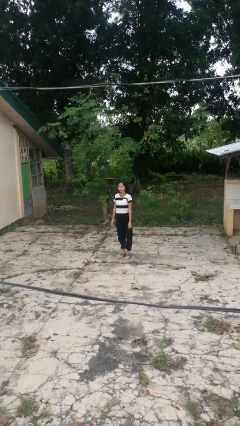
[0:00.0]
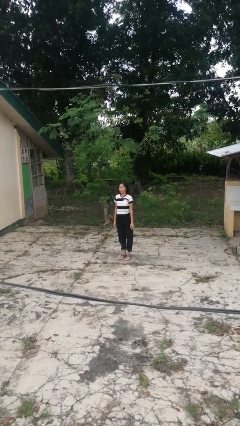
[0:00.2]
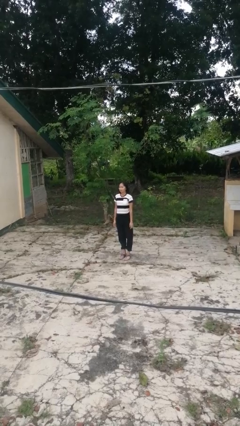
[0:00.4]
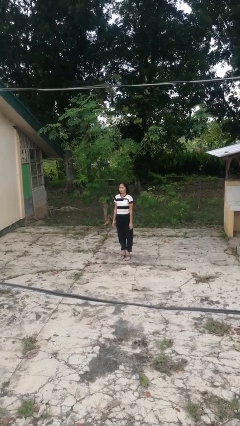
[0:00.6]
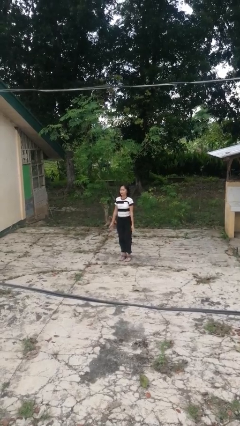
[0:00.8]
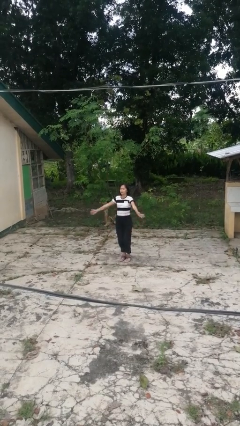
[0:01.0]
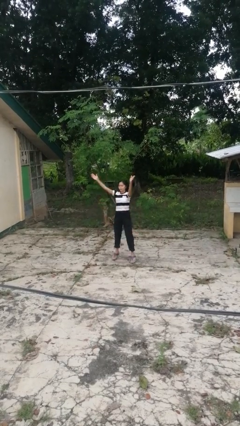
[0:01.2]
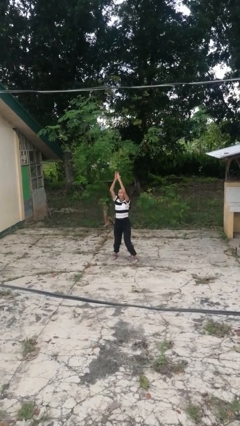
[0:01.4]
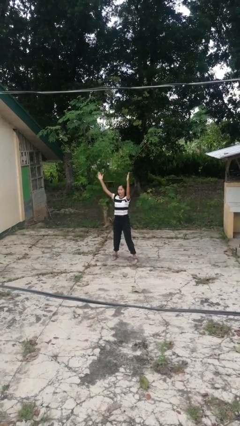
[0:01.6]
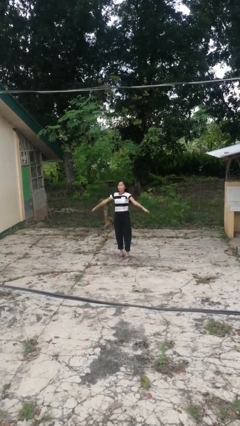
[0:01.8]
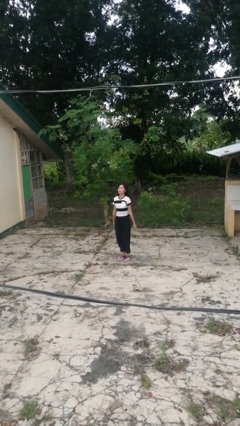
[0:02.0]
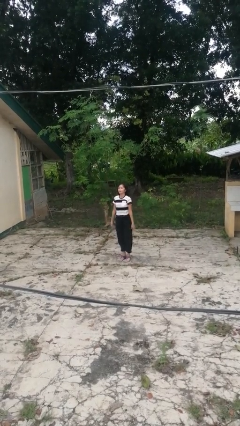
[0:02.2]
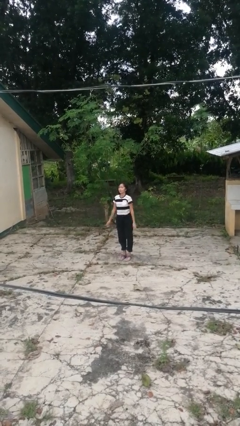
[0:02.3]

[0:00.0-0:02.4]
person exercises with jumping jacks

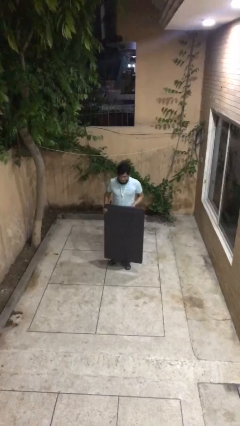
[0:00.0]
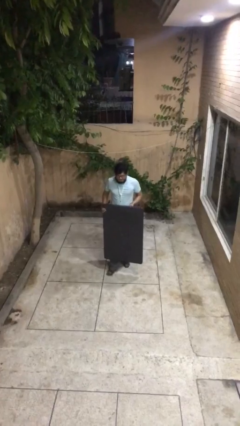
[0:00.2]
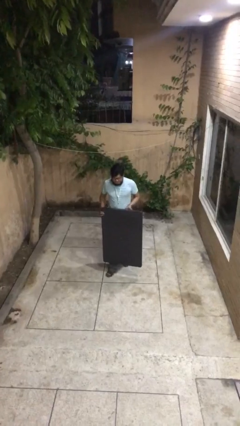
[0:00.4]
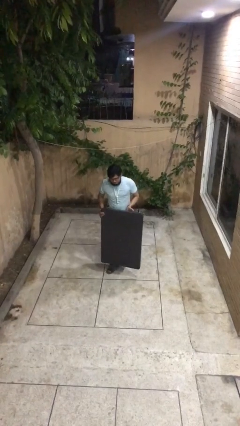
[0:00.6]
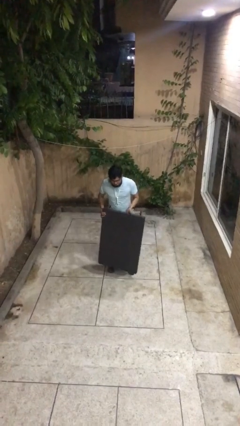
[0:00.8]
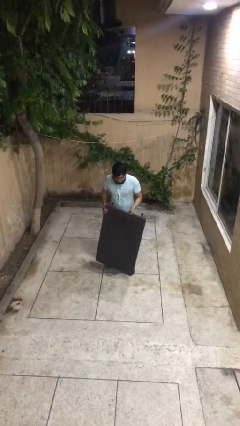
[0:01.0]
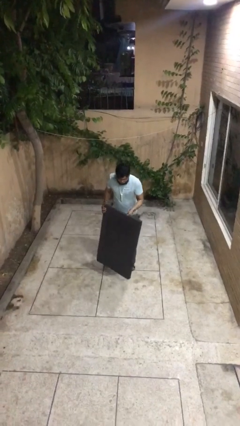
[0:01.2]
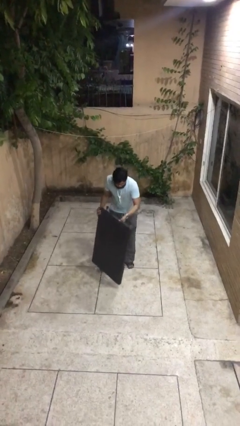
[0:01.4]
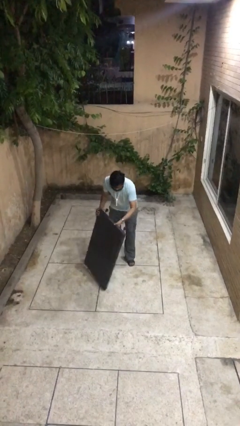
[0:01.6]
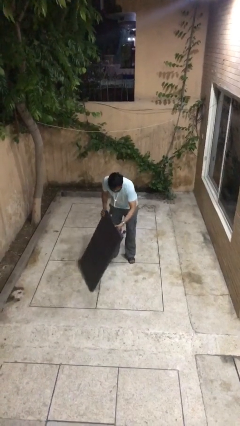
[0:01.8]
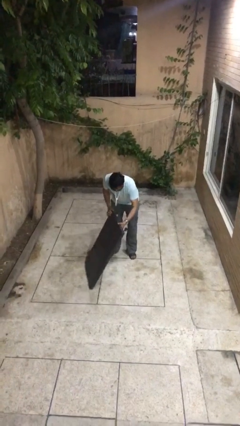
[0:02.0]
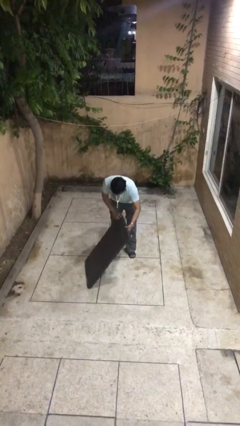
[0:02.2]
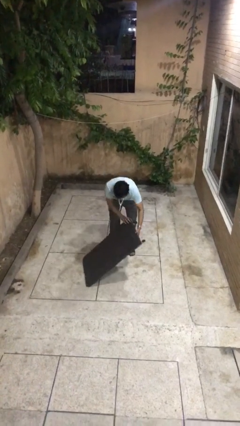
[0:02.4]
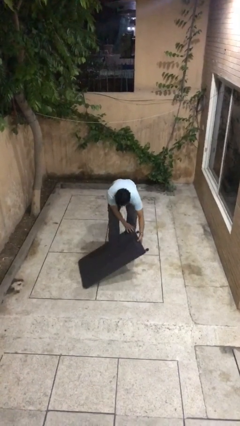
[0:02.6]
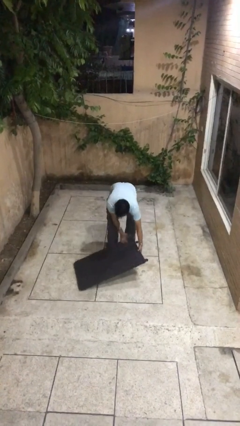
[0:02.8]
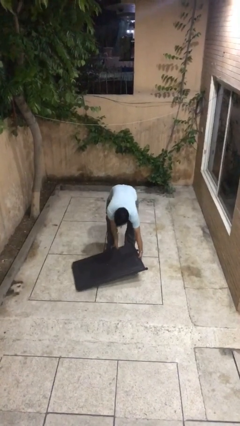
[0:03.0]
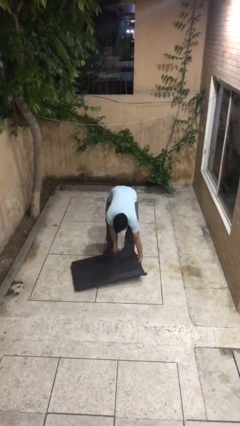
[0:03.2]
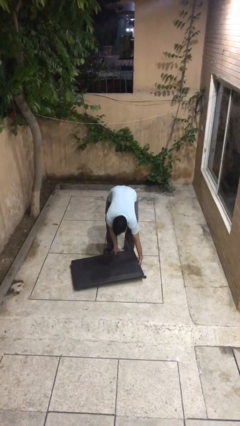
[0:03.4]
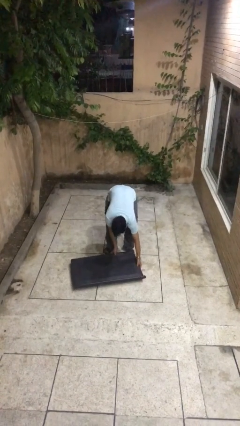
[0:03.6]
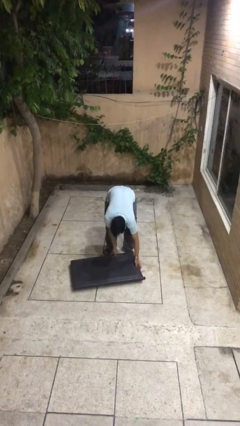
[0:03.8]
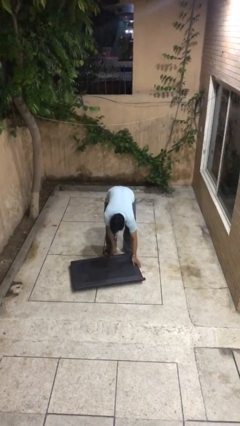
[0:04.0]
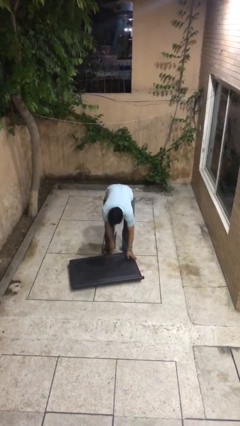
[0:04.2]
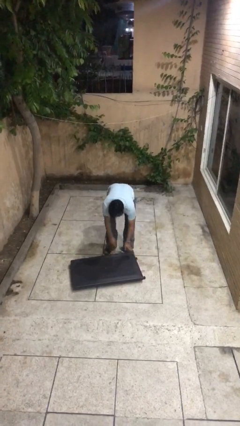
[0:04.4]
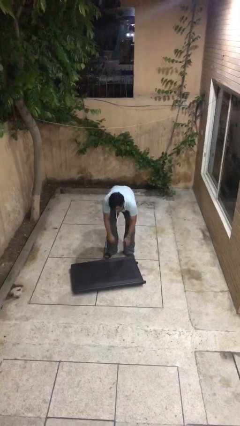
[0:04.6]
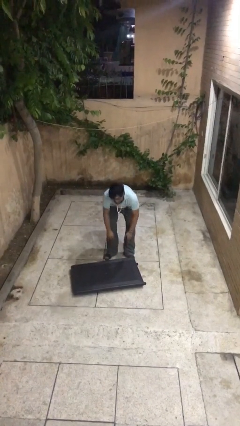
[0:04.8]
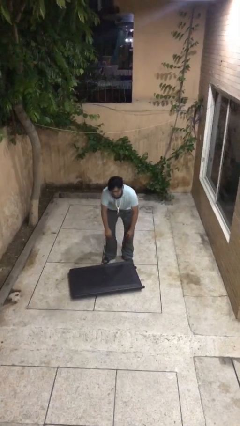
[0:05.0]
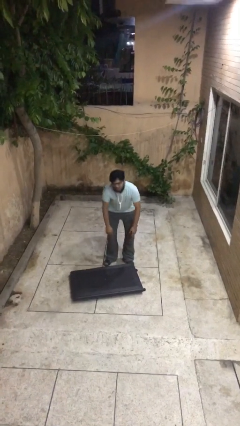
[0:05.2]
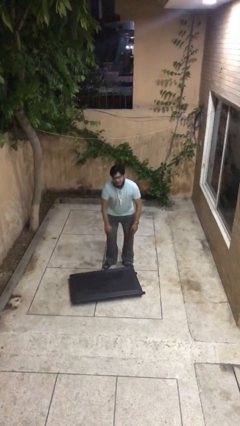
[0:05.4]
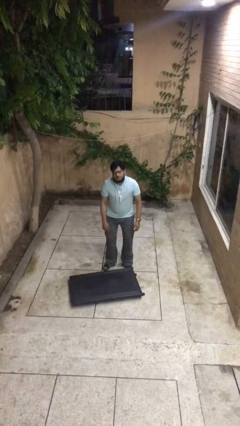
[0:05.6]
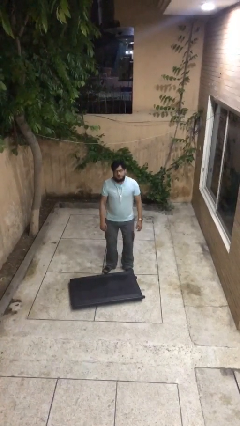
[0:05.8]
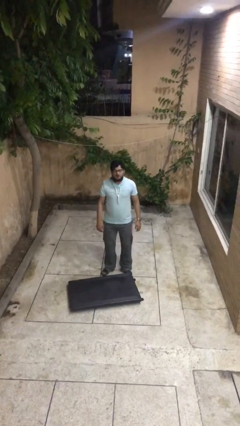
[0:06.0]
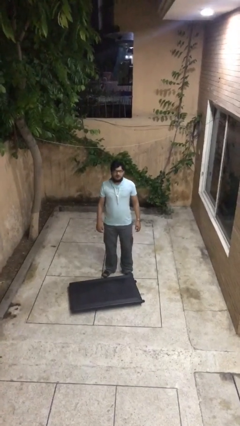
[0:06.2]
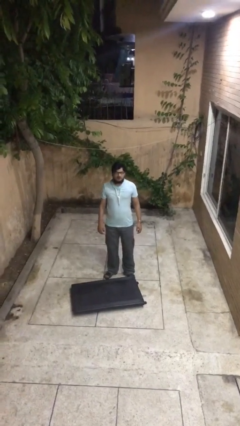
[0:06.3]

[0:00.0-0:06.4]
person puts down object on floor

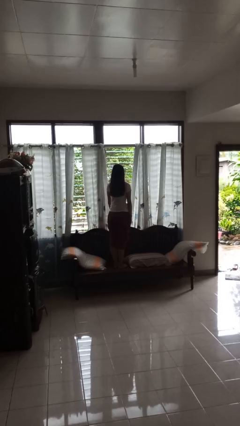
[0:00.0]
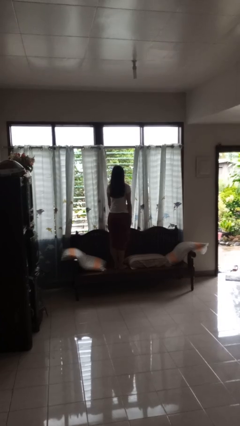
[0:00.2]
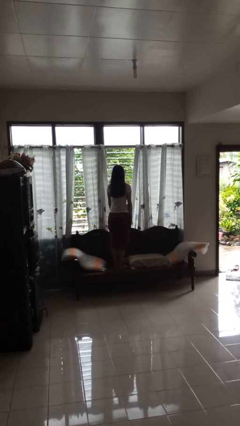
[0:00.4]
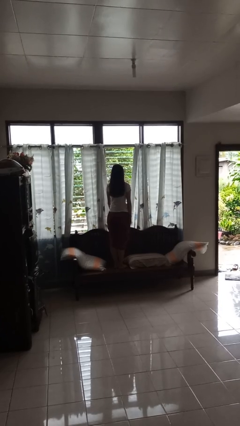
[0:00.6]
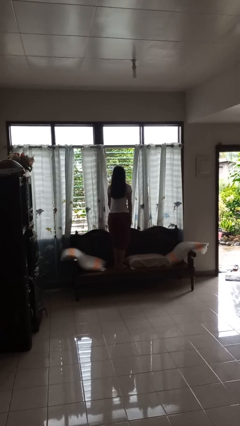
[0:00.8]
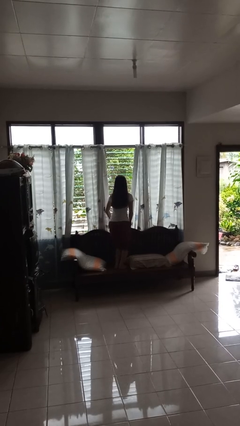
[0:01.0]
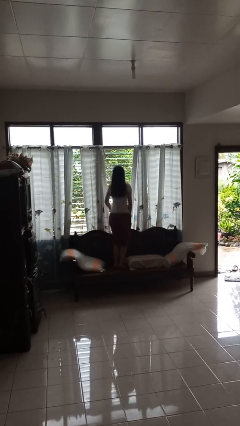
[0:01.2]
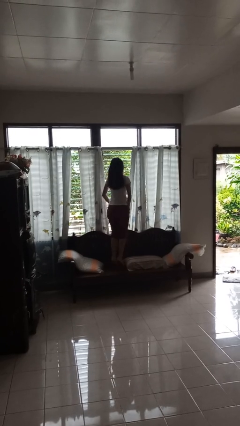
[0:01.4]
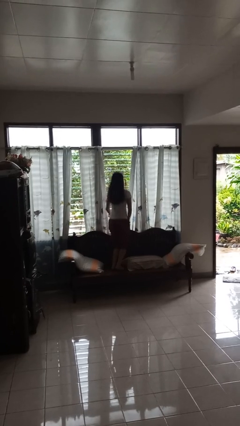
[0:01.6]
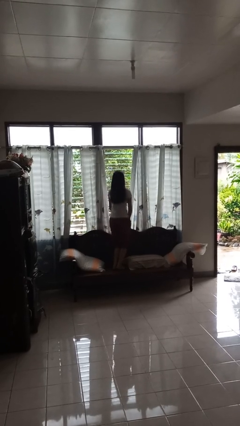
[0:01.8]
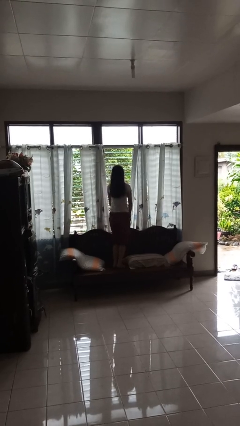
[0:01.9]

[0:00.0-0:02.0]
person jumps on couch

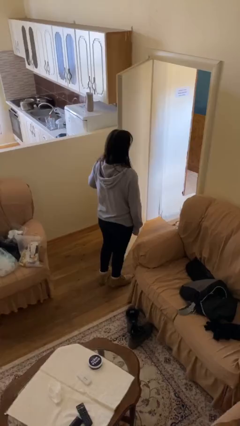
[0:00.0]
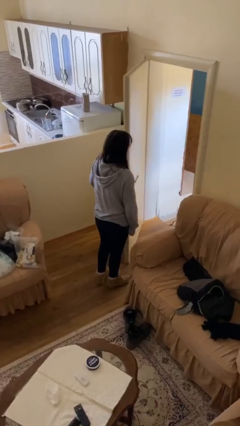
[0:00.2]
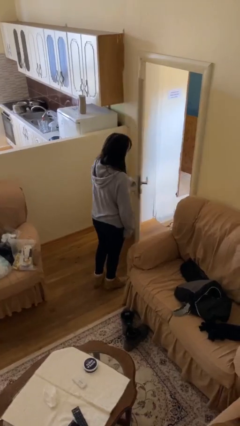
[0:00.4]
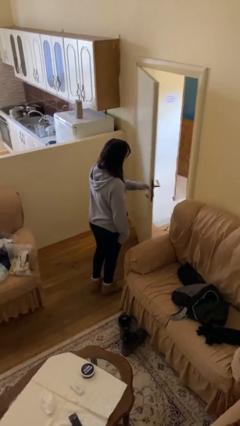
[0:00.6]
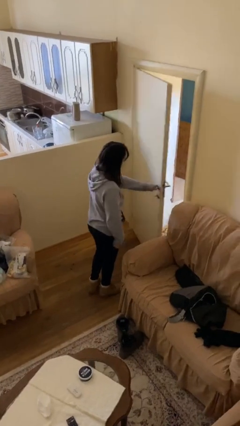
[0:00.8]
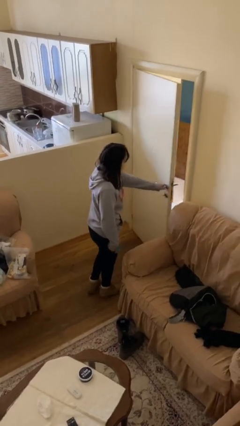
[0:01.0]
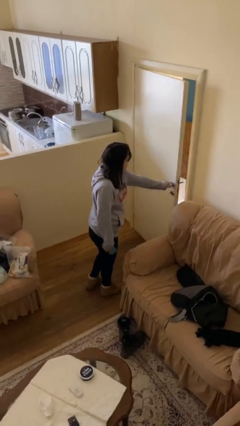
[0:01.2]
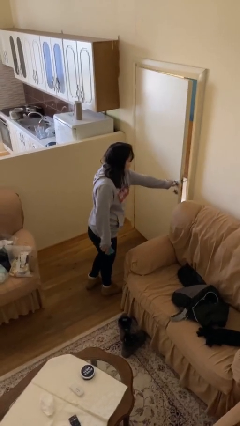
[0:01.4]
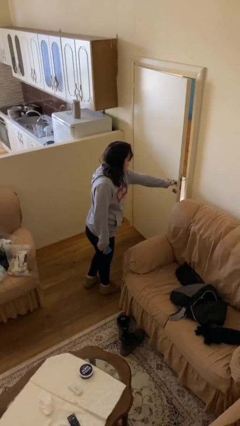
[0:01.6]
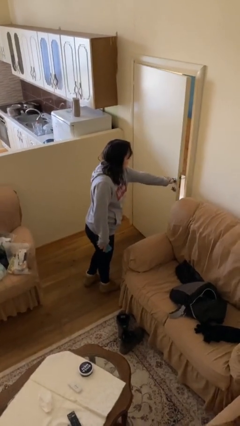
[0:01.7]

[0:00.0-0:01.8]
person closes facility door

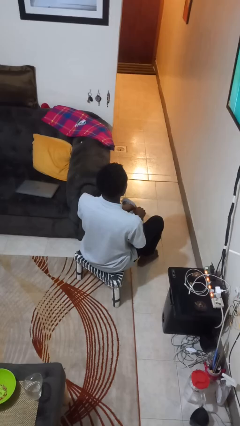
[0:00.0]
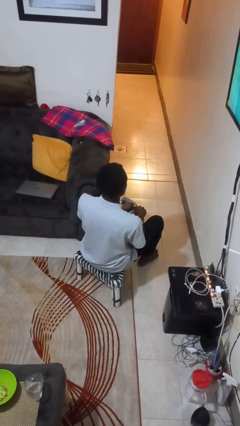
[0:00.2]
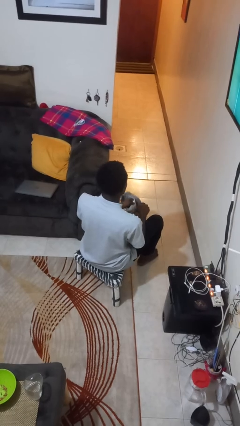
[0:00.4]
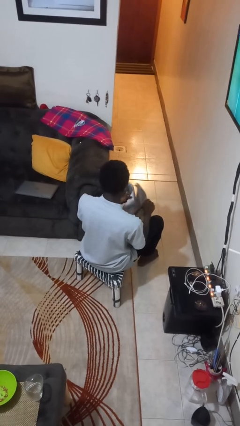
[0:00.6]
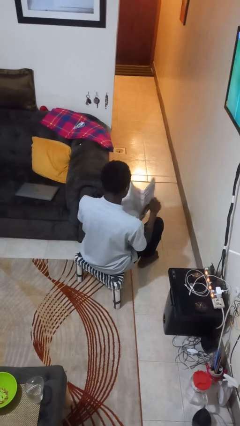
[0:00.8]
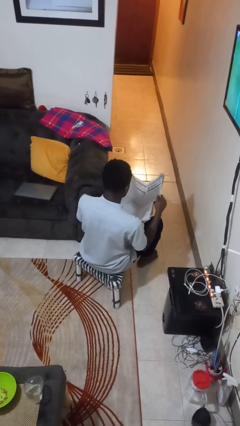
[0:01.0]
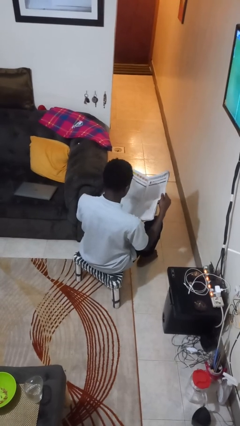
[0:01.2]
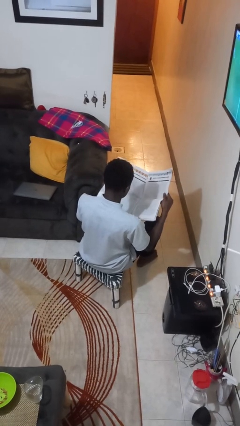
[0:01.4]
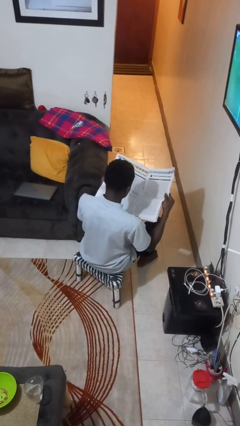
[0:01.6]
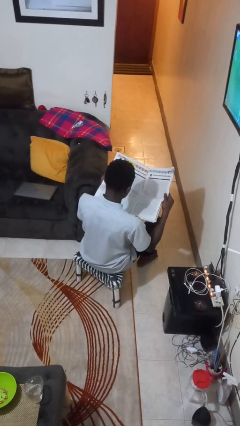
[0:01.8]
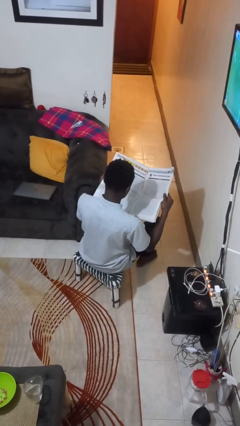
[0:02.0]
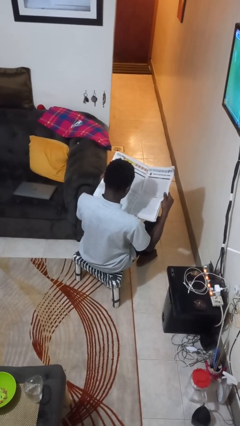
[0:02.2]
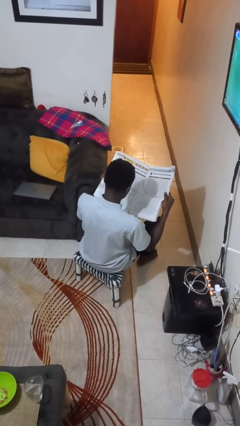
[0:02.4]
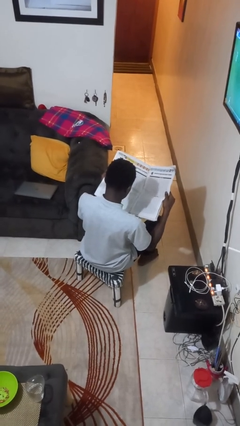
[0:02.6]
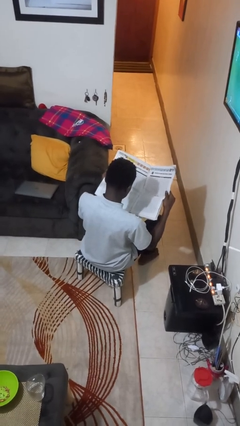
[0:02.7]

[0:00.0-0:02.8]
person reads newspaper

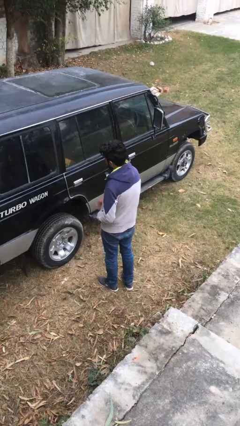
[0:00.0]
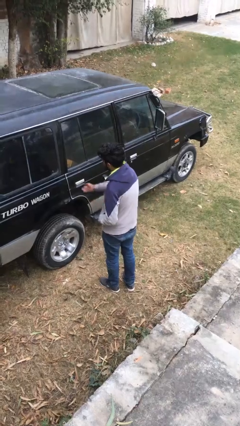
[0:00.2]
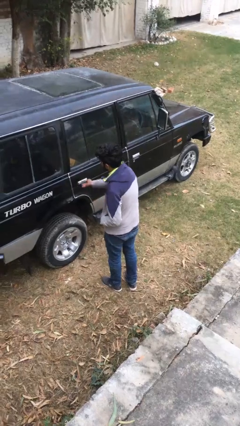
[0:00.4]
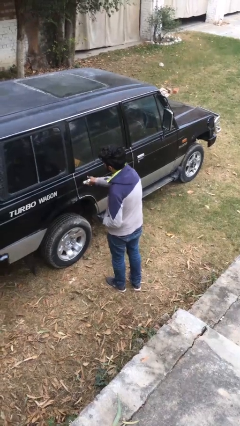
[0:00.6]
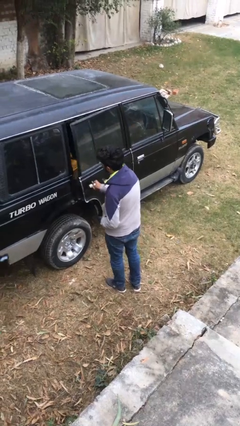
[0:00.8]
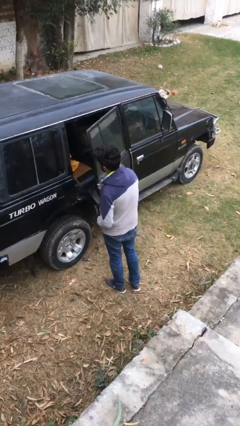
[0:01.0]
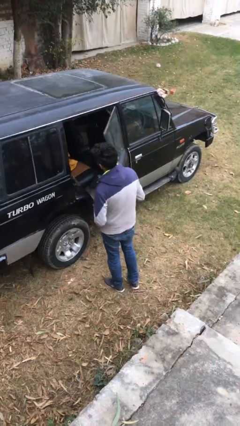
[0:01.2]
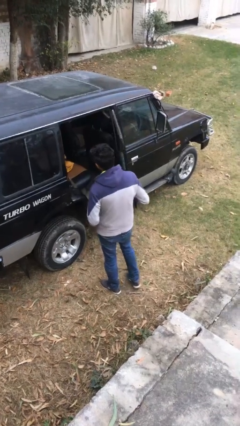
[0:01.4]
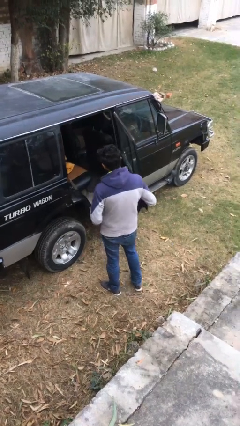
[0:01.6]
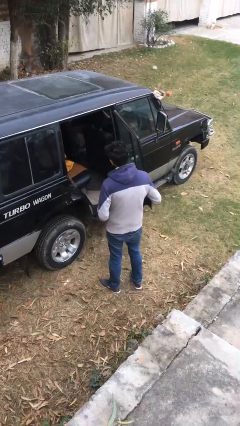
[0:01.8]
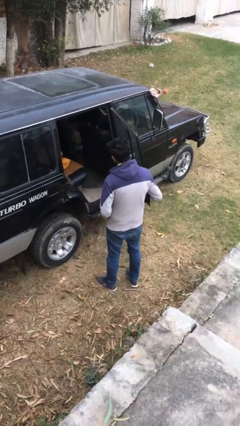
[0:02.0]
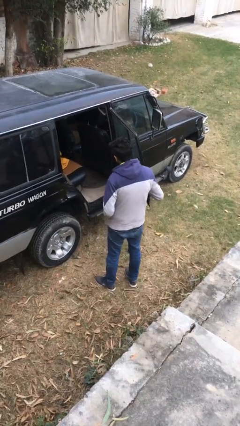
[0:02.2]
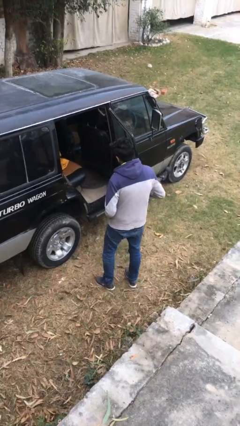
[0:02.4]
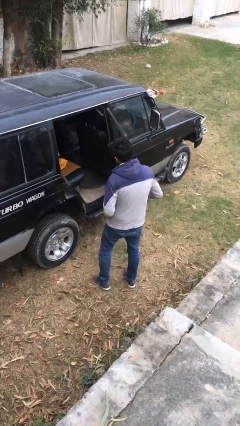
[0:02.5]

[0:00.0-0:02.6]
person opens car door
